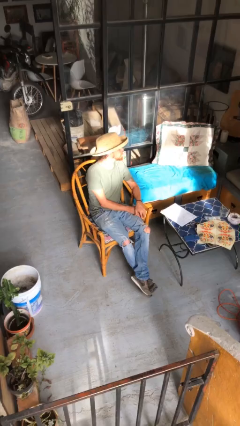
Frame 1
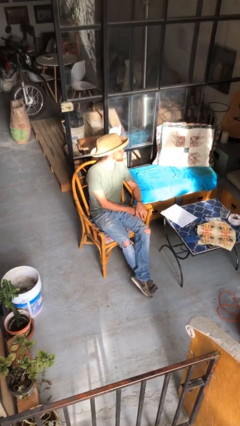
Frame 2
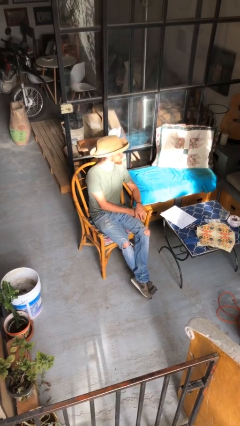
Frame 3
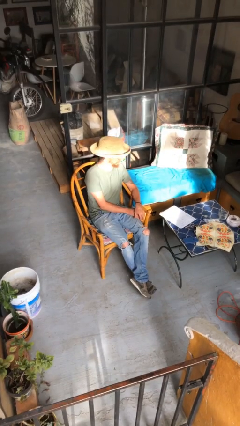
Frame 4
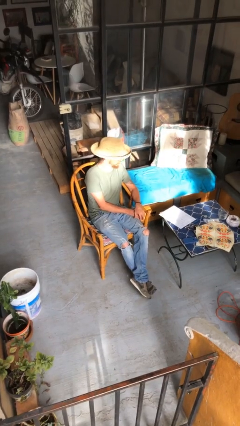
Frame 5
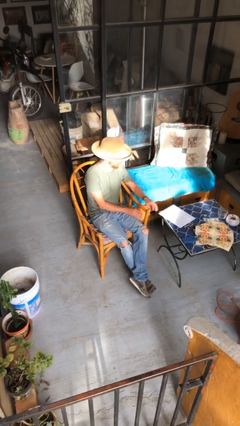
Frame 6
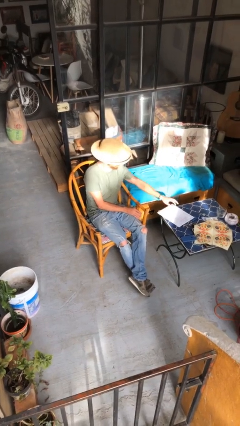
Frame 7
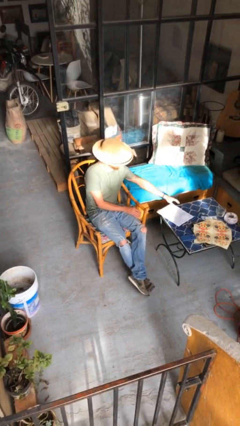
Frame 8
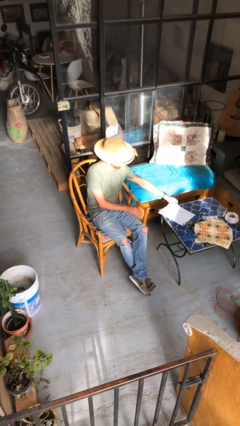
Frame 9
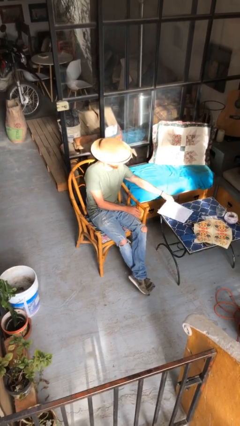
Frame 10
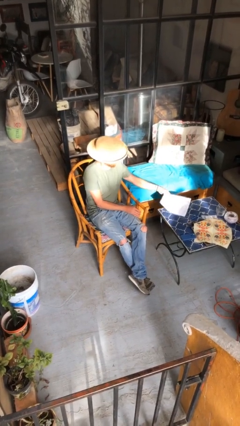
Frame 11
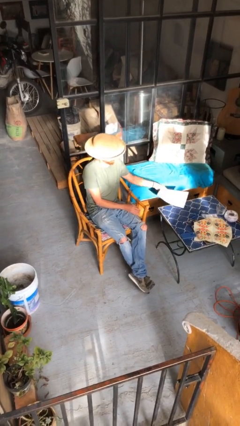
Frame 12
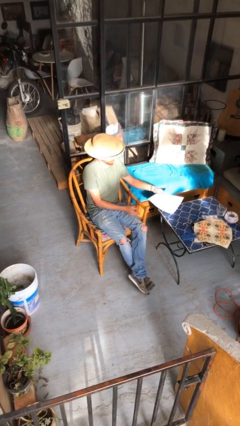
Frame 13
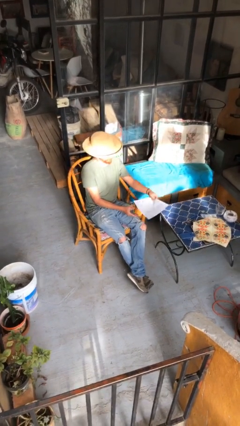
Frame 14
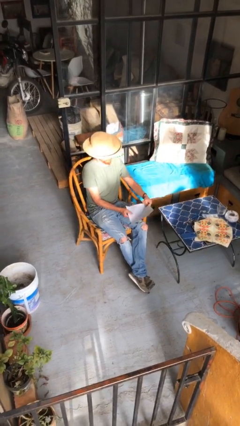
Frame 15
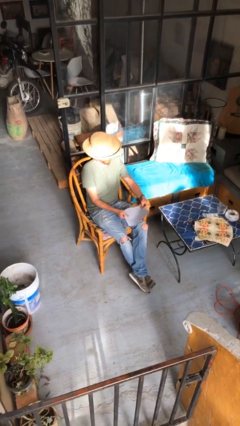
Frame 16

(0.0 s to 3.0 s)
person picks up object from table

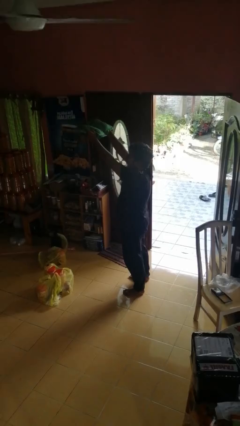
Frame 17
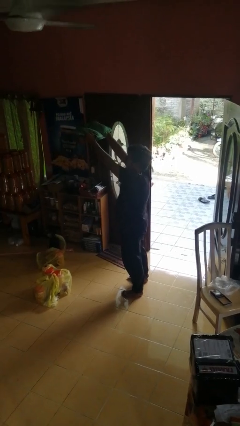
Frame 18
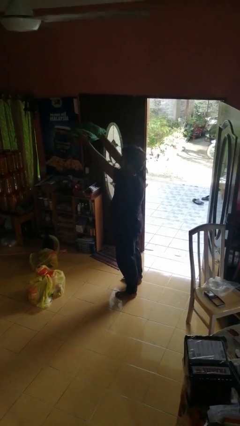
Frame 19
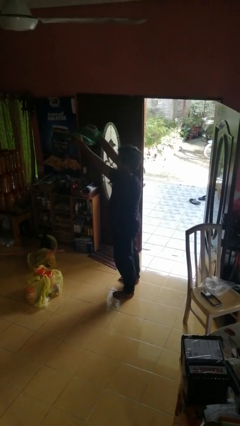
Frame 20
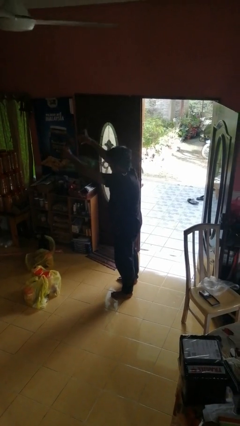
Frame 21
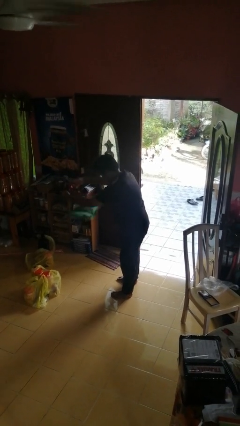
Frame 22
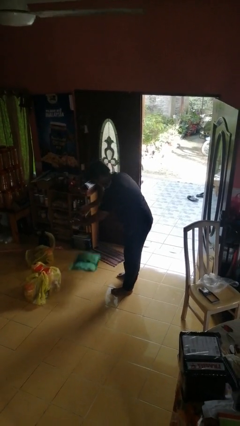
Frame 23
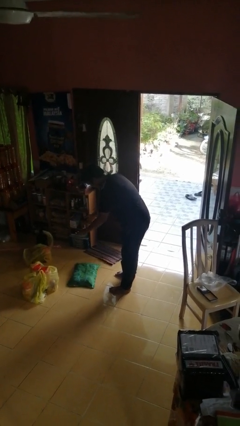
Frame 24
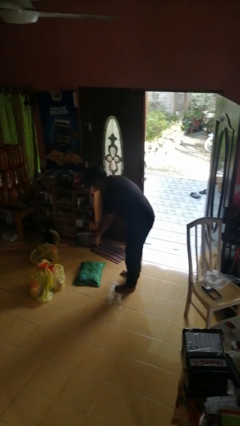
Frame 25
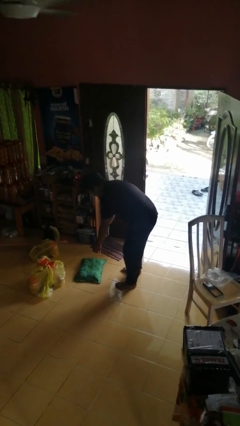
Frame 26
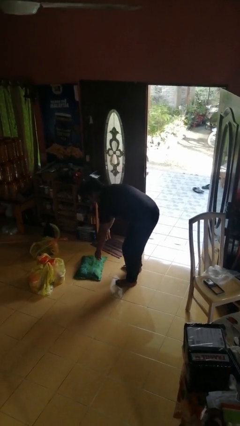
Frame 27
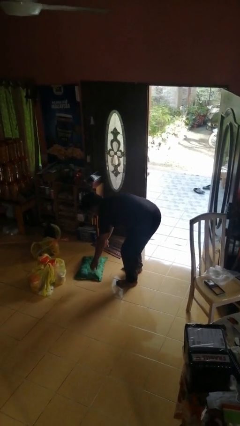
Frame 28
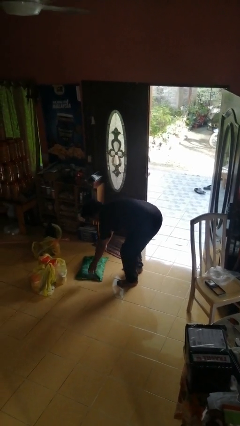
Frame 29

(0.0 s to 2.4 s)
person drops object

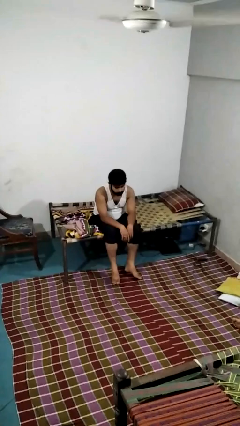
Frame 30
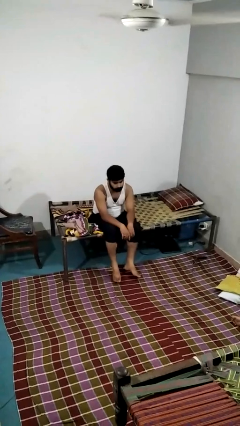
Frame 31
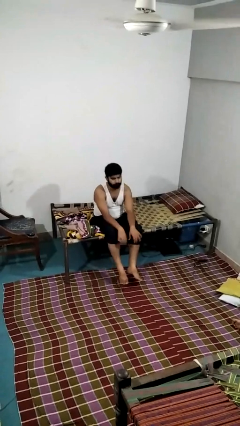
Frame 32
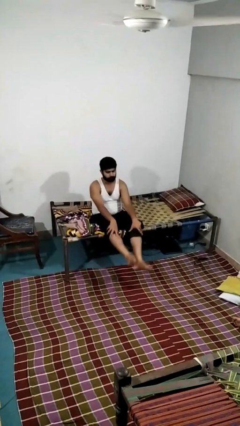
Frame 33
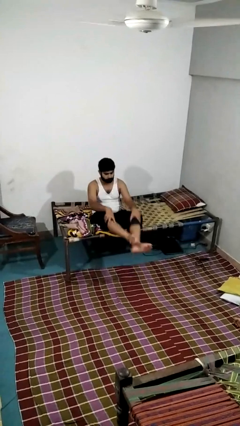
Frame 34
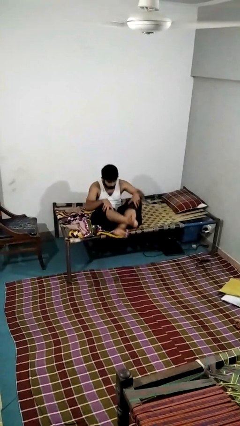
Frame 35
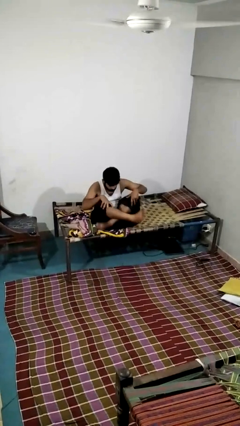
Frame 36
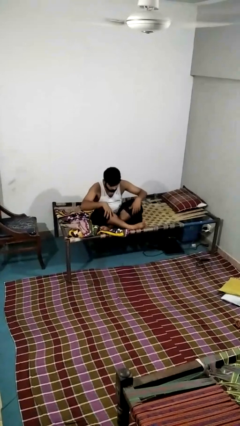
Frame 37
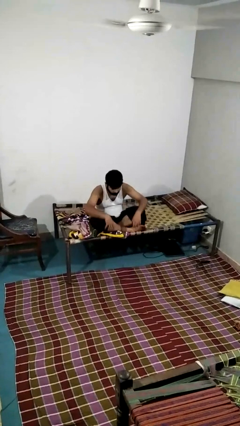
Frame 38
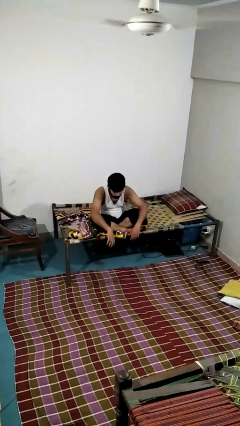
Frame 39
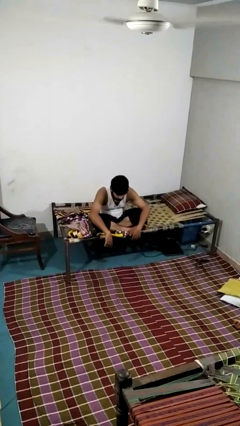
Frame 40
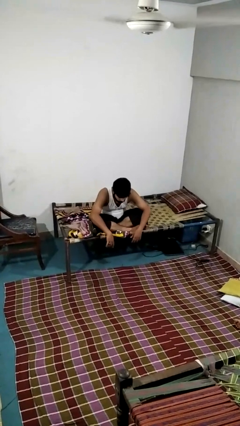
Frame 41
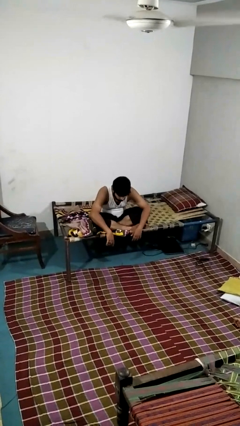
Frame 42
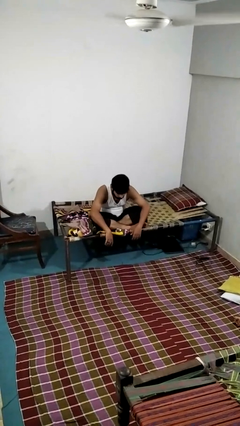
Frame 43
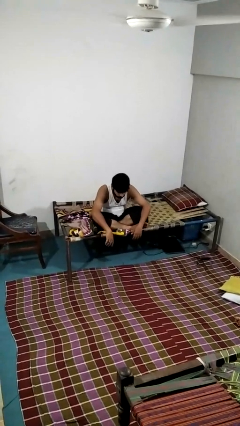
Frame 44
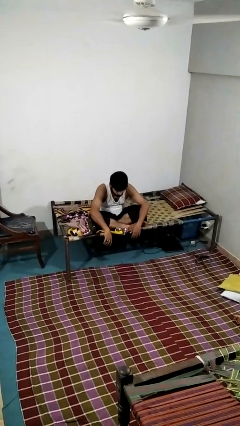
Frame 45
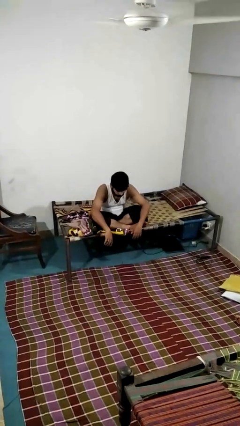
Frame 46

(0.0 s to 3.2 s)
person crosses legs

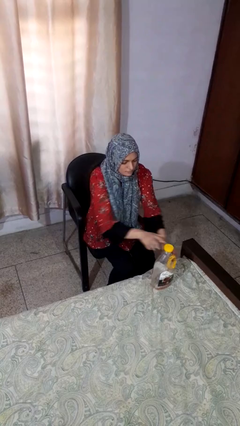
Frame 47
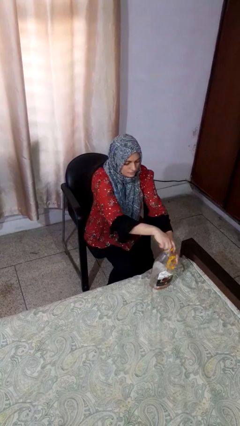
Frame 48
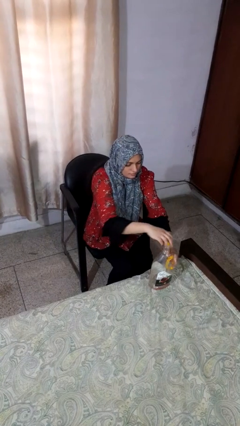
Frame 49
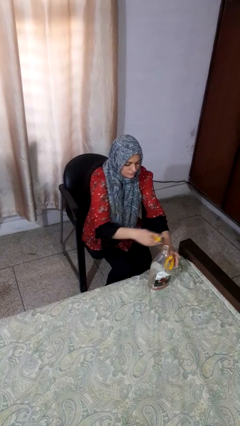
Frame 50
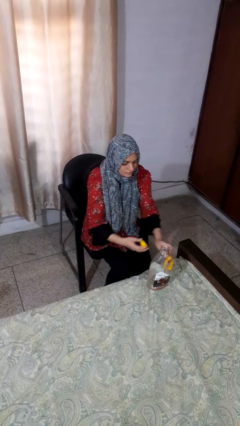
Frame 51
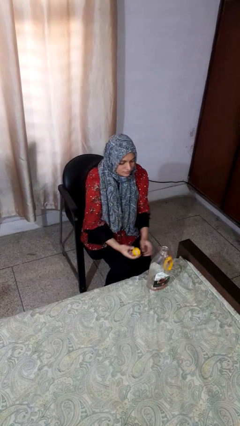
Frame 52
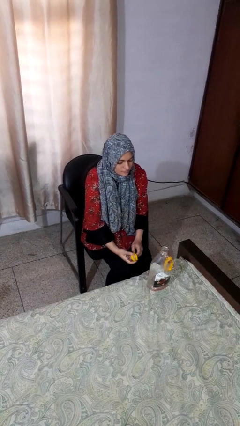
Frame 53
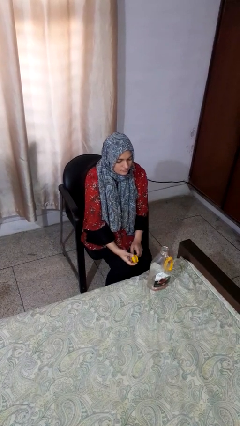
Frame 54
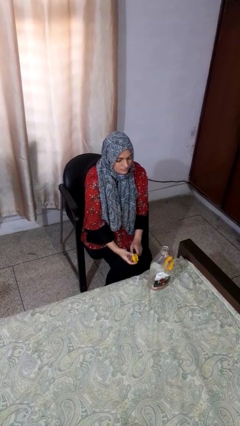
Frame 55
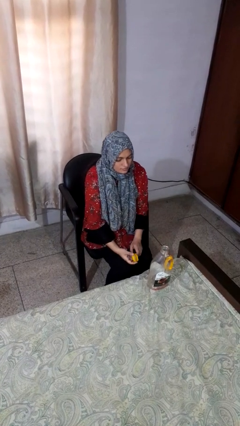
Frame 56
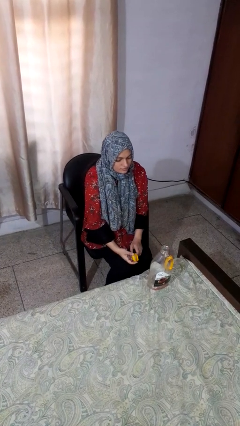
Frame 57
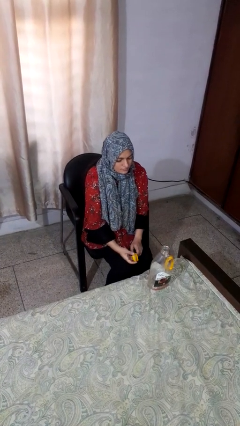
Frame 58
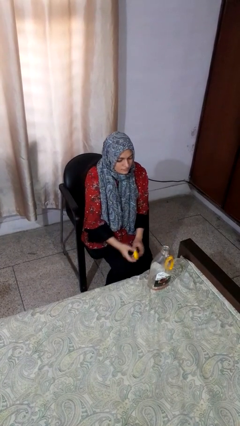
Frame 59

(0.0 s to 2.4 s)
person unscrews lid from bottle

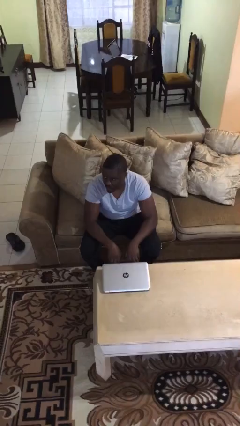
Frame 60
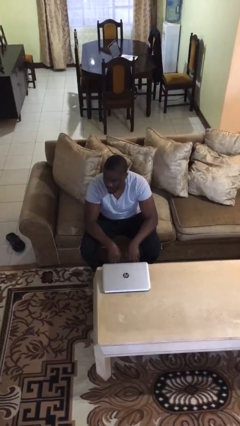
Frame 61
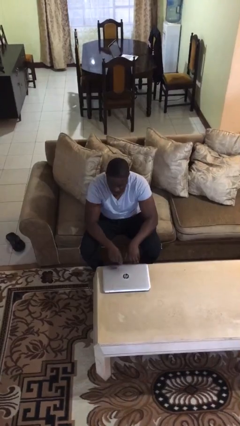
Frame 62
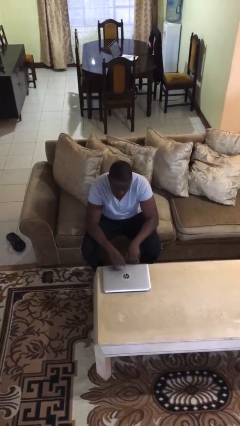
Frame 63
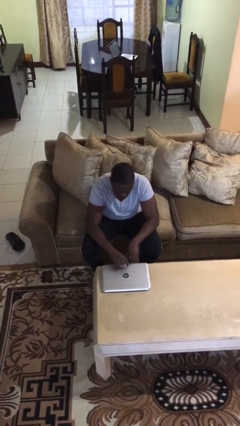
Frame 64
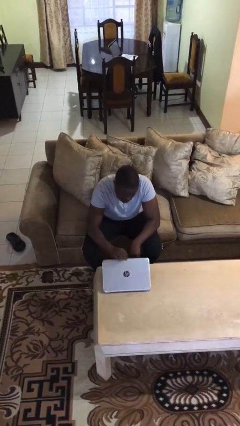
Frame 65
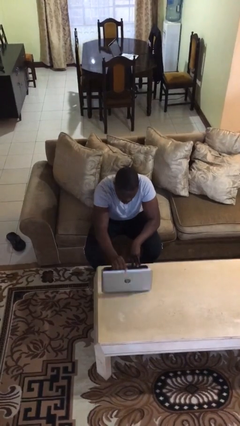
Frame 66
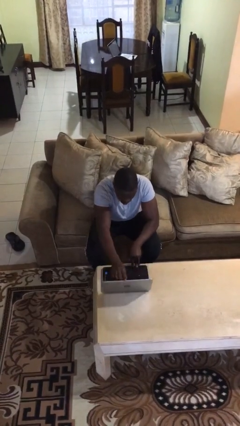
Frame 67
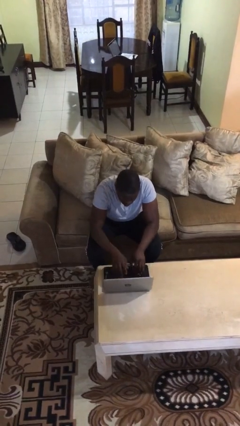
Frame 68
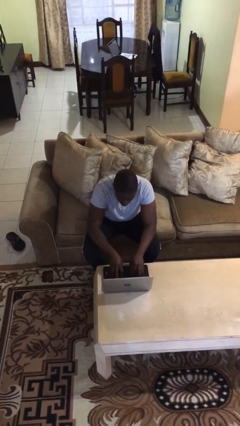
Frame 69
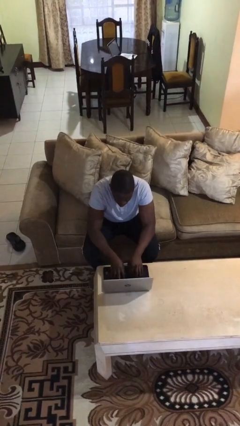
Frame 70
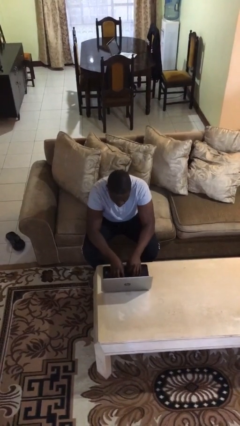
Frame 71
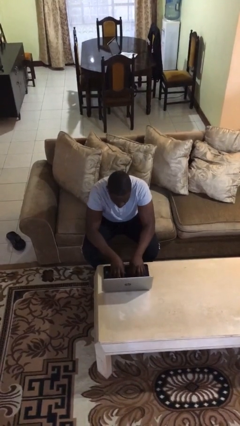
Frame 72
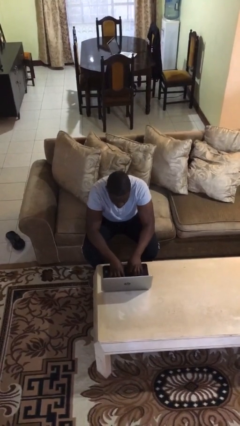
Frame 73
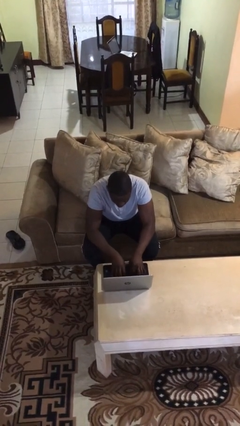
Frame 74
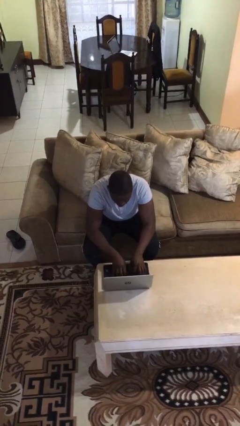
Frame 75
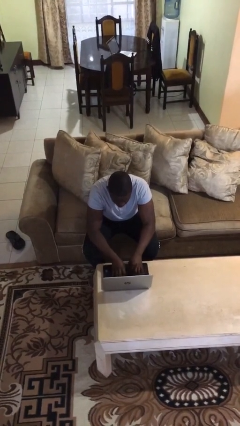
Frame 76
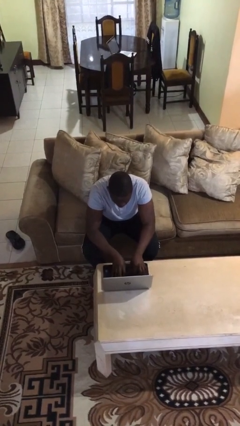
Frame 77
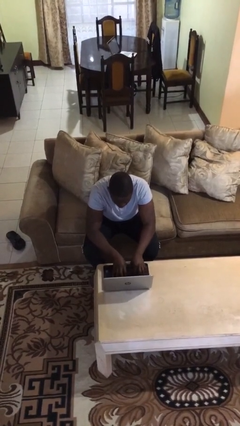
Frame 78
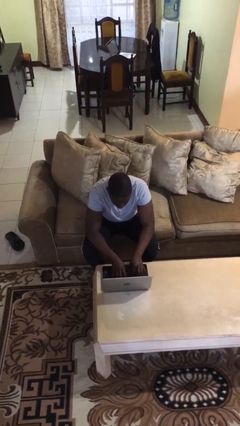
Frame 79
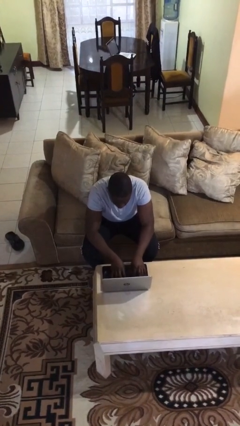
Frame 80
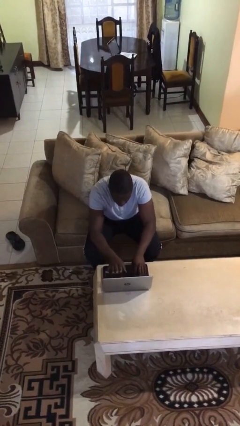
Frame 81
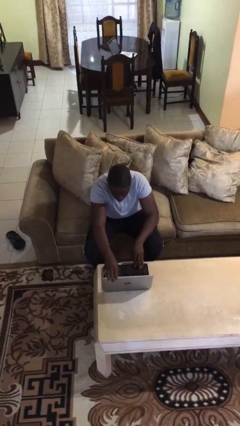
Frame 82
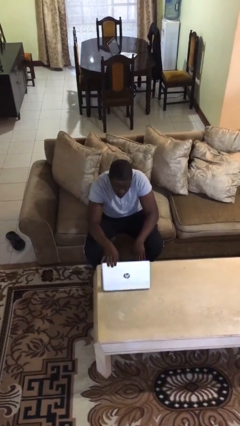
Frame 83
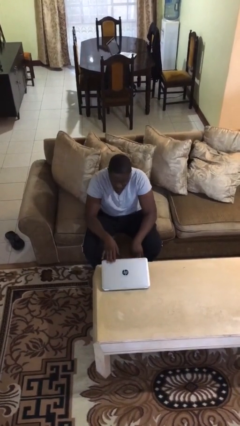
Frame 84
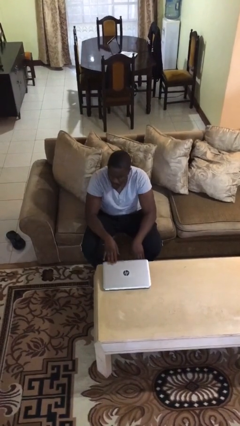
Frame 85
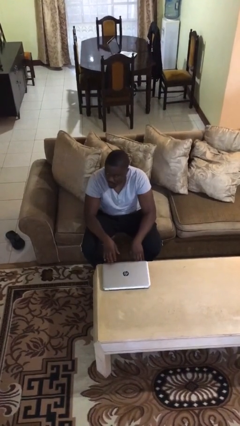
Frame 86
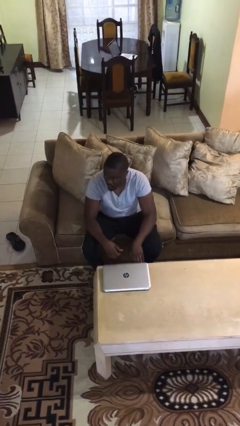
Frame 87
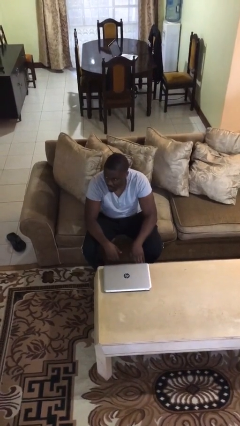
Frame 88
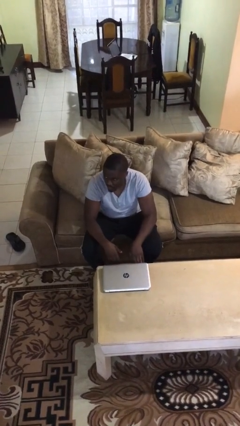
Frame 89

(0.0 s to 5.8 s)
person interacts with laptop

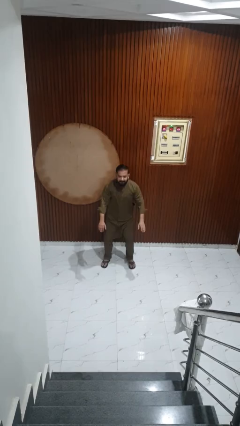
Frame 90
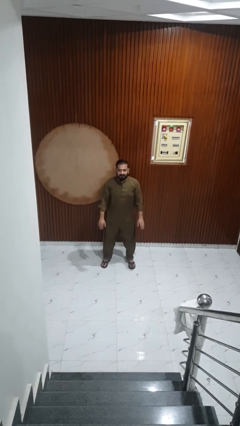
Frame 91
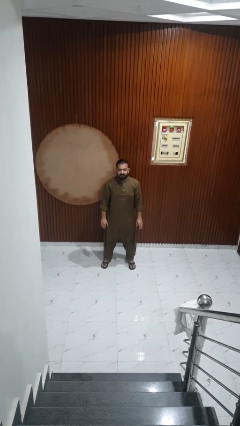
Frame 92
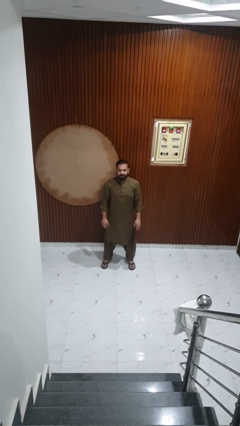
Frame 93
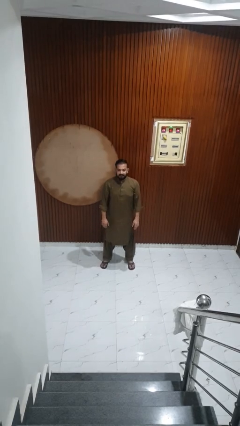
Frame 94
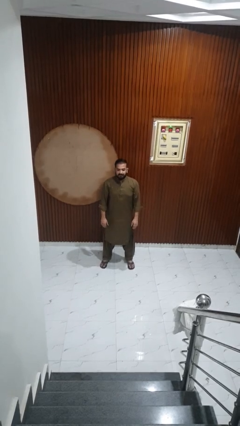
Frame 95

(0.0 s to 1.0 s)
person stands up
